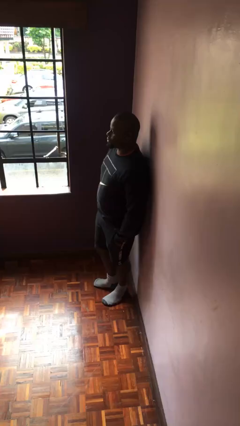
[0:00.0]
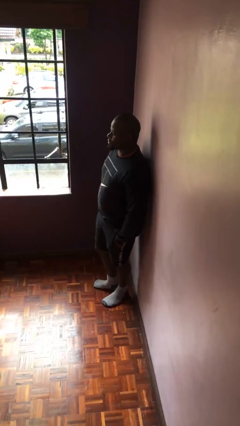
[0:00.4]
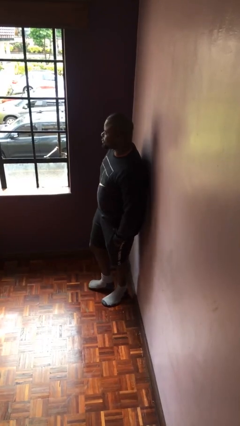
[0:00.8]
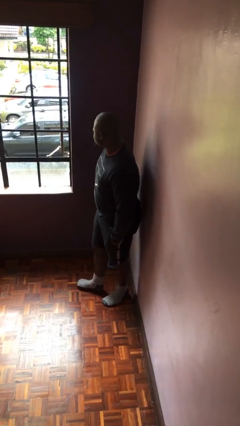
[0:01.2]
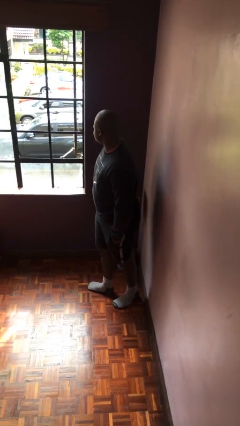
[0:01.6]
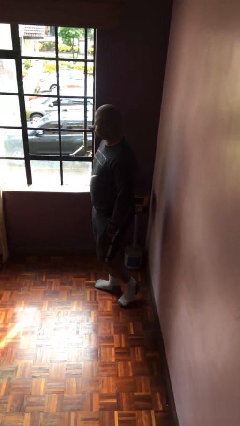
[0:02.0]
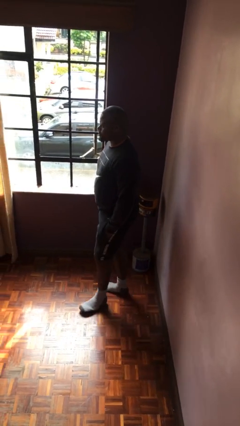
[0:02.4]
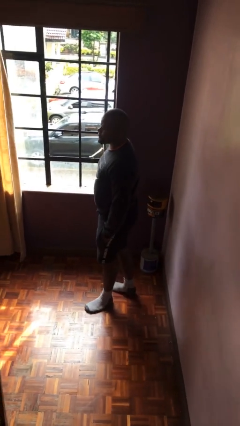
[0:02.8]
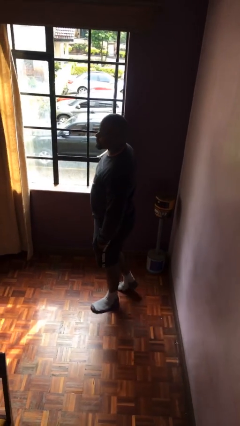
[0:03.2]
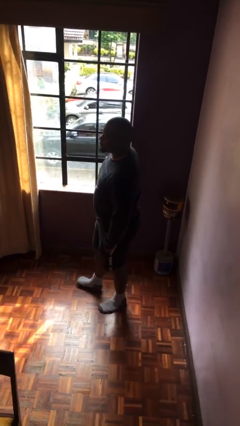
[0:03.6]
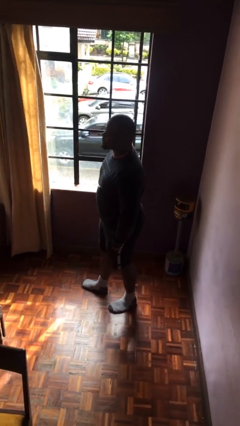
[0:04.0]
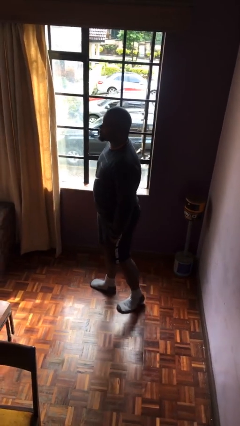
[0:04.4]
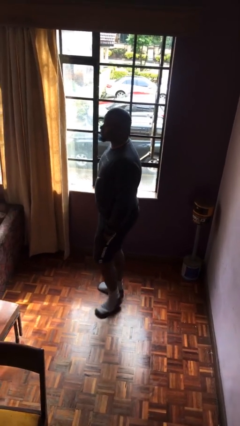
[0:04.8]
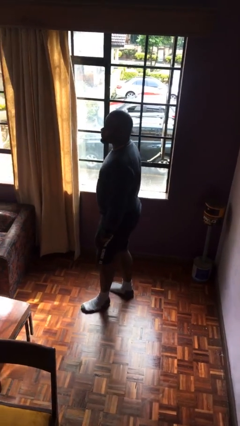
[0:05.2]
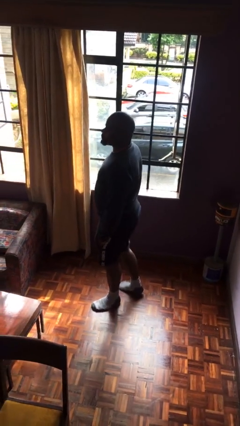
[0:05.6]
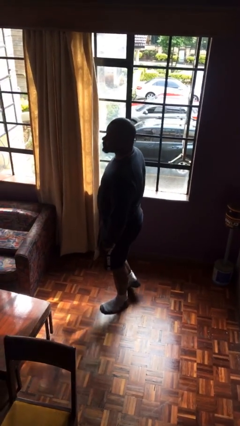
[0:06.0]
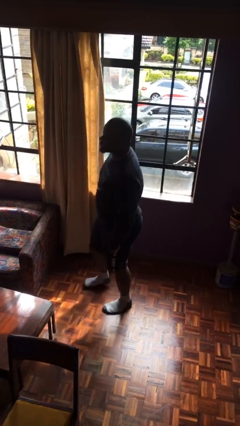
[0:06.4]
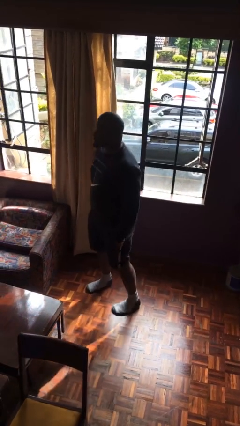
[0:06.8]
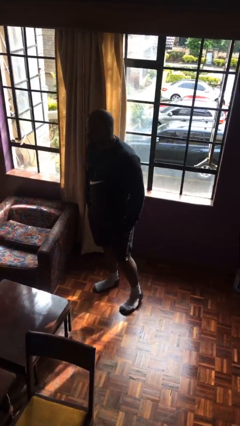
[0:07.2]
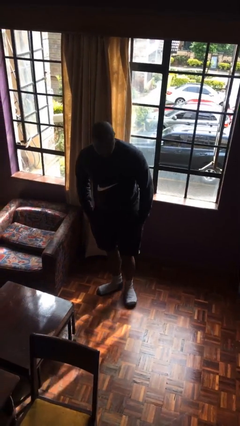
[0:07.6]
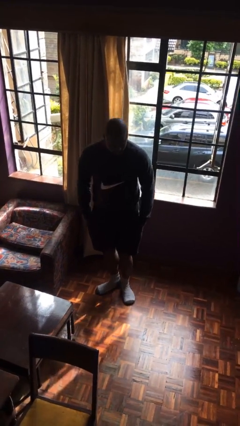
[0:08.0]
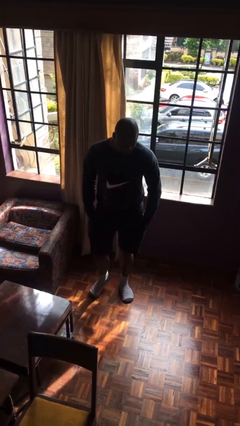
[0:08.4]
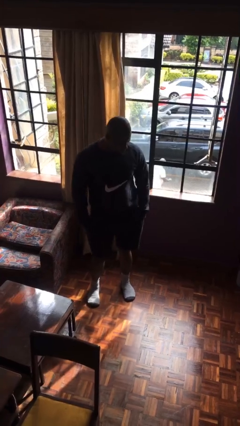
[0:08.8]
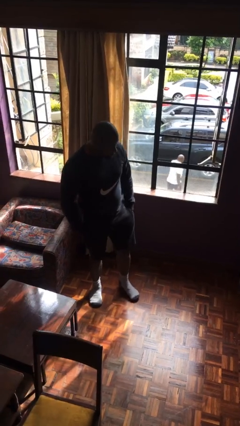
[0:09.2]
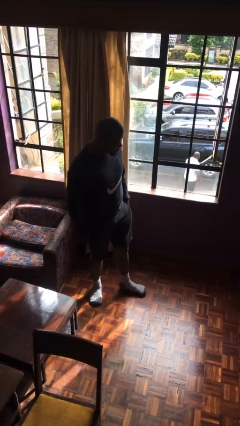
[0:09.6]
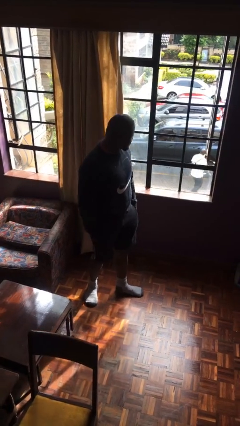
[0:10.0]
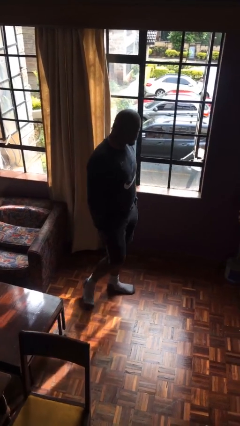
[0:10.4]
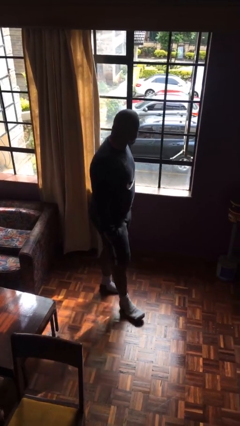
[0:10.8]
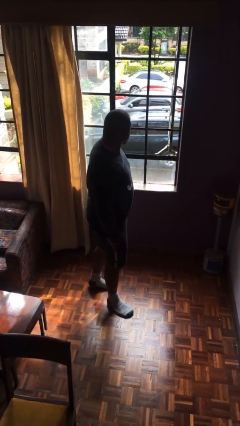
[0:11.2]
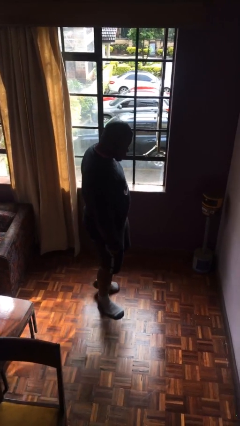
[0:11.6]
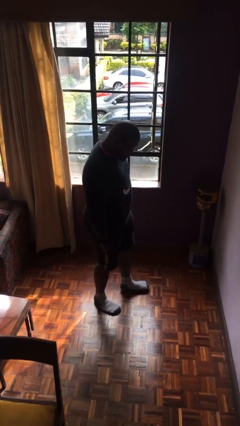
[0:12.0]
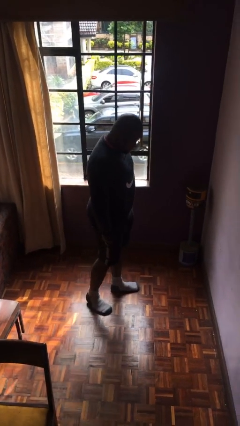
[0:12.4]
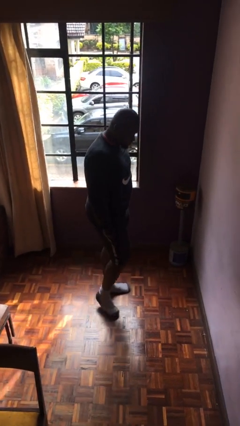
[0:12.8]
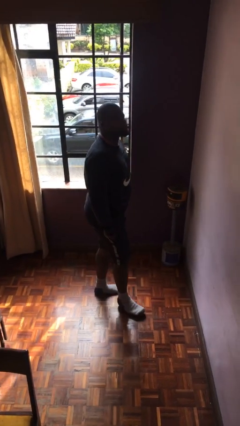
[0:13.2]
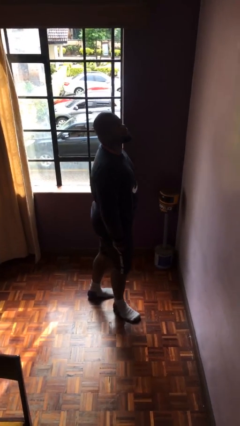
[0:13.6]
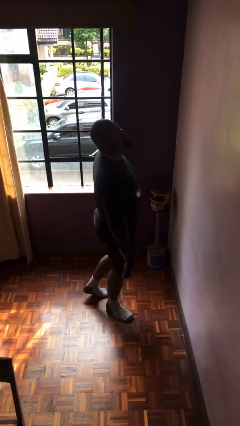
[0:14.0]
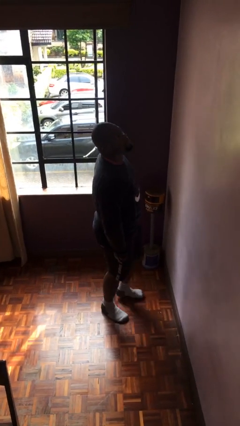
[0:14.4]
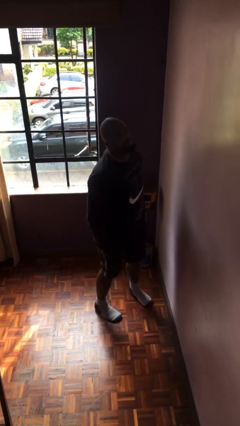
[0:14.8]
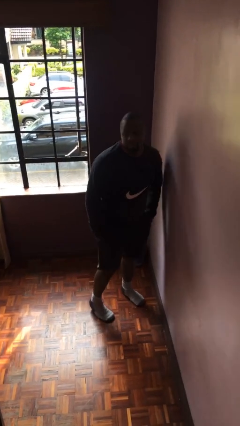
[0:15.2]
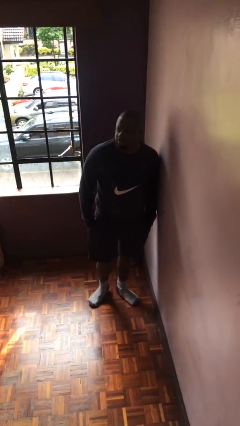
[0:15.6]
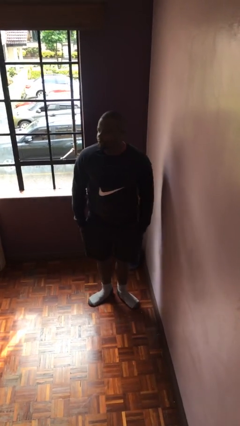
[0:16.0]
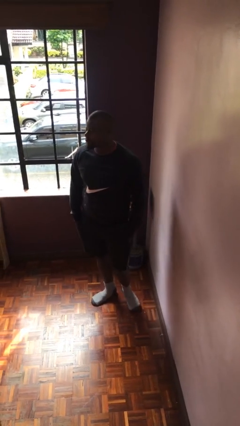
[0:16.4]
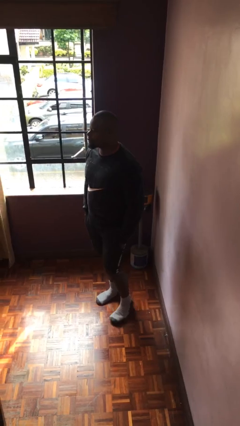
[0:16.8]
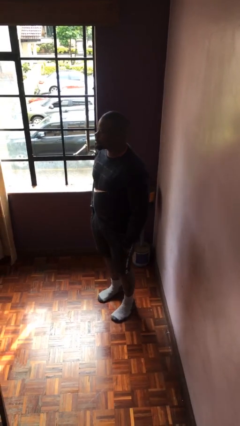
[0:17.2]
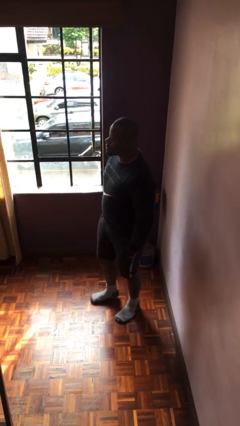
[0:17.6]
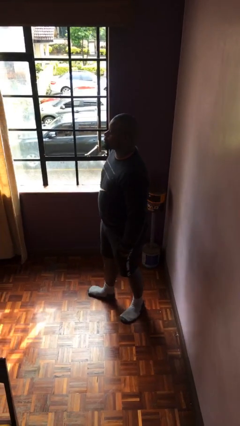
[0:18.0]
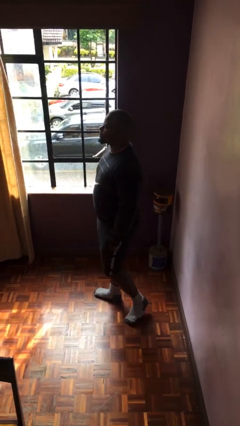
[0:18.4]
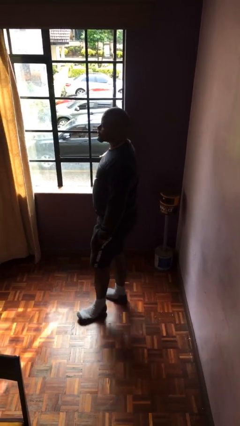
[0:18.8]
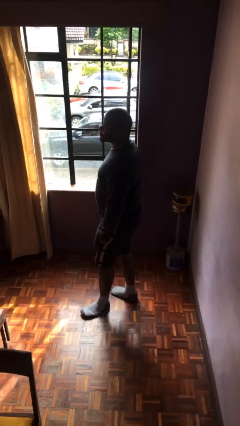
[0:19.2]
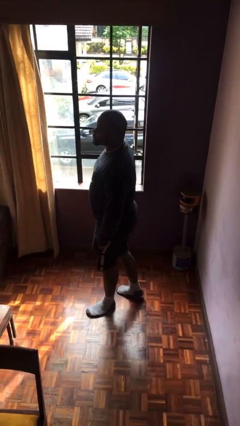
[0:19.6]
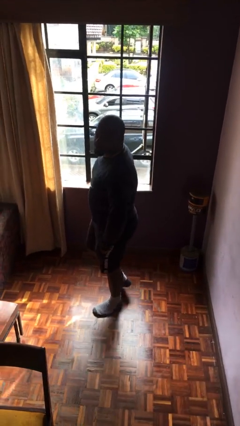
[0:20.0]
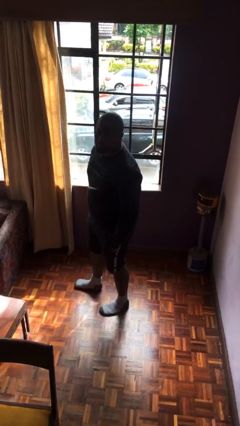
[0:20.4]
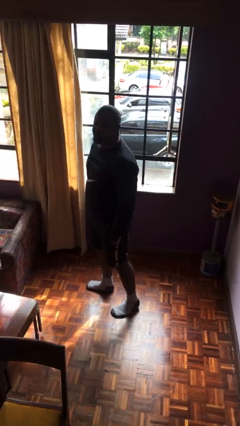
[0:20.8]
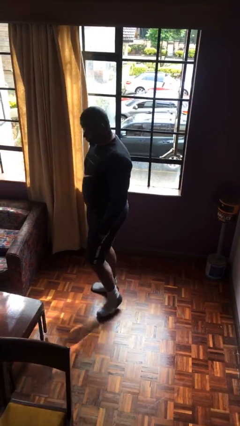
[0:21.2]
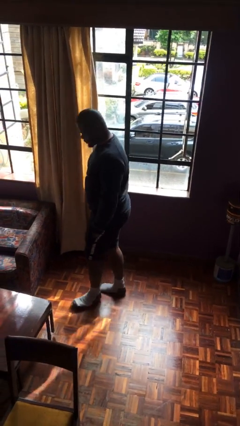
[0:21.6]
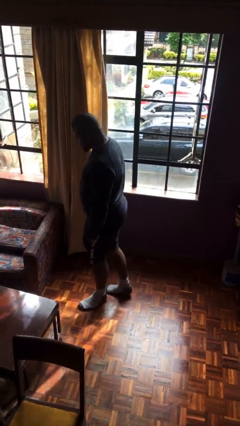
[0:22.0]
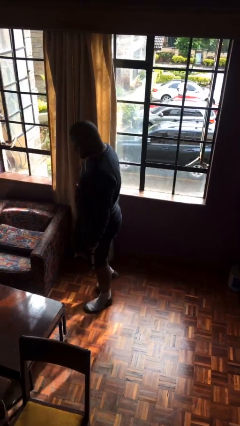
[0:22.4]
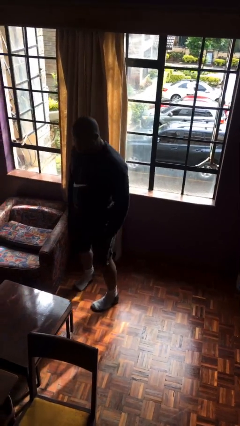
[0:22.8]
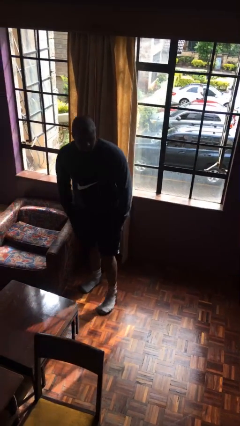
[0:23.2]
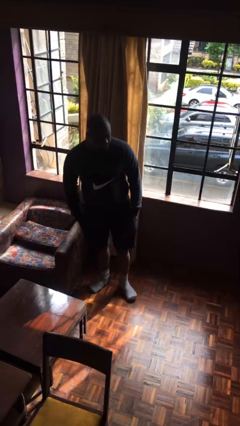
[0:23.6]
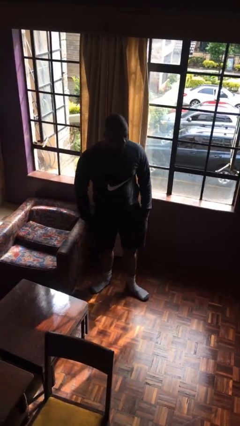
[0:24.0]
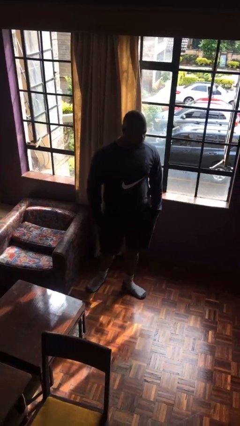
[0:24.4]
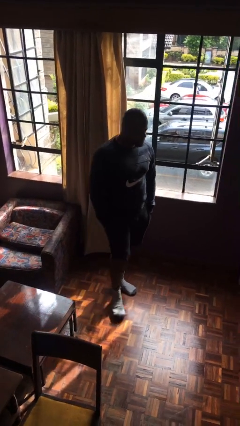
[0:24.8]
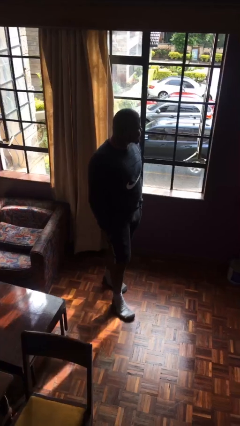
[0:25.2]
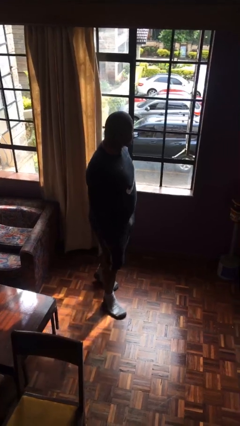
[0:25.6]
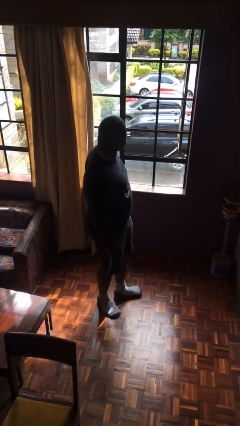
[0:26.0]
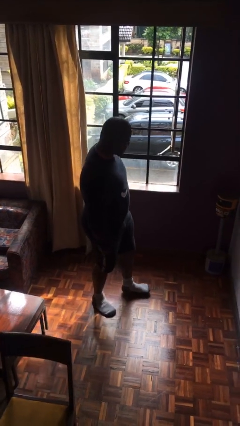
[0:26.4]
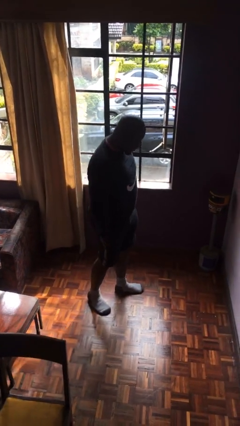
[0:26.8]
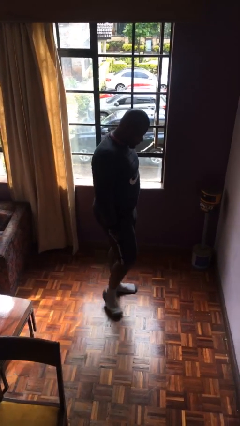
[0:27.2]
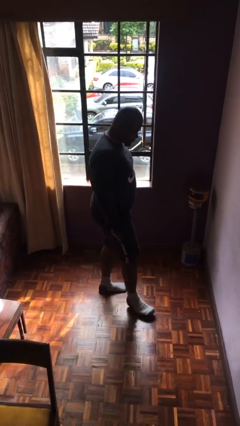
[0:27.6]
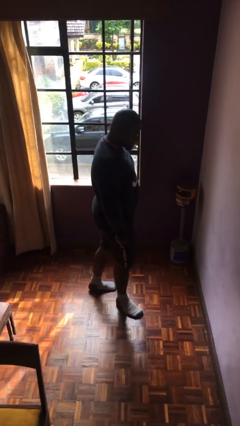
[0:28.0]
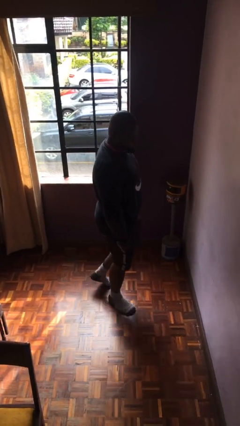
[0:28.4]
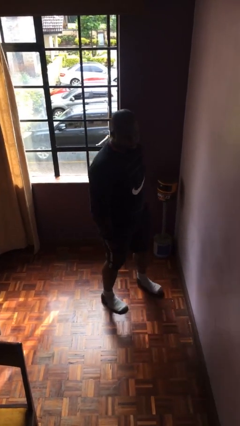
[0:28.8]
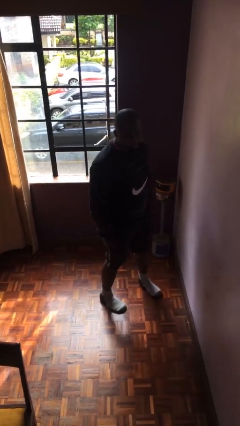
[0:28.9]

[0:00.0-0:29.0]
person walks

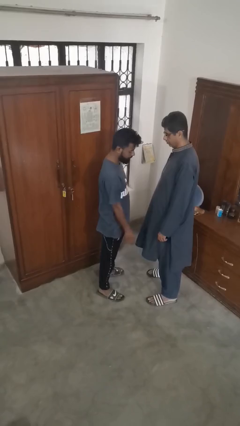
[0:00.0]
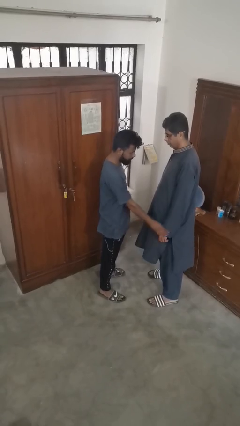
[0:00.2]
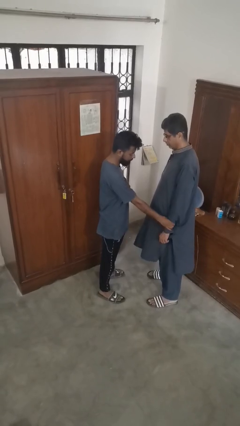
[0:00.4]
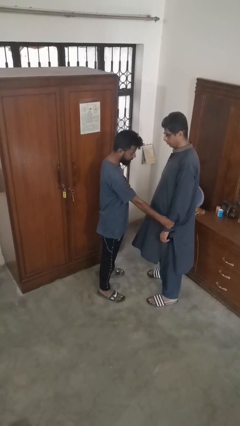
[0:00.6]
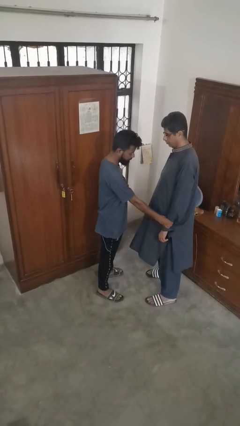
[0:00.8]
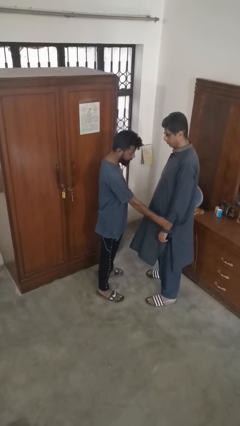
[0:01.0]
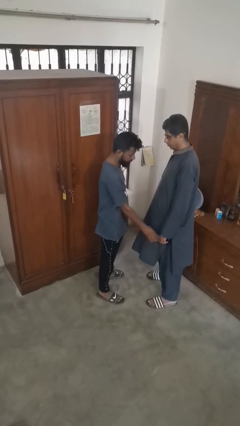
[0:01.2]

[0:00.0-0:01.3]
person grabs person by forearm

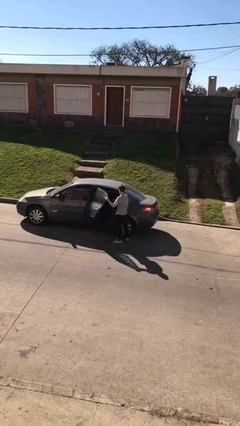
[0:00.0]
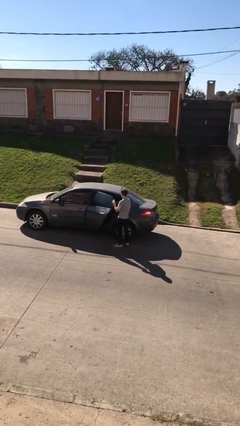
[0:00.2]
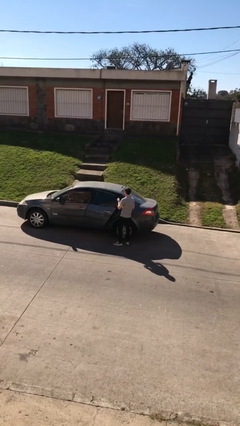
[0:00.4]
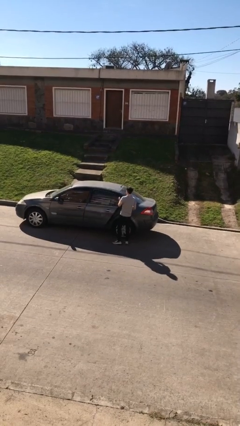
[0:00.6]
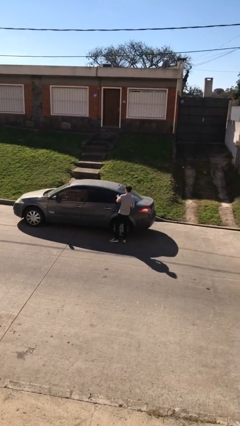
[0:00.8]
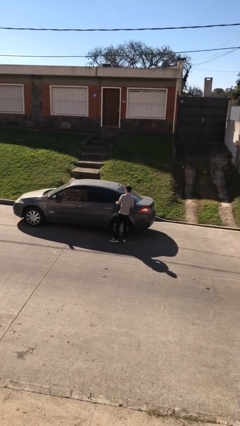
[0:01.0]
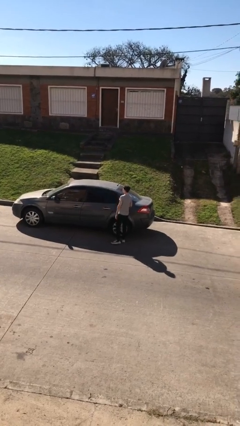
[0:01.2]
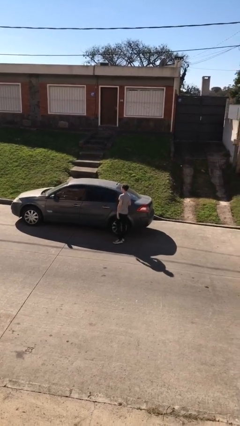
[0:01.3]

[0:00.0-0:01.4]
person closes car door

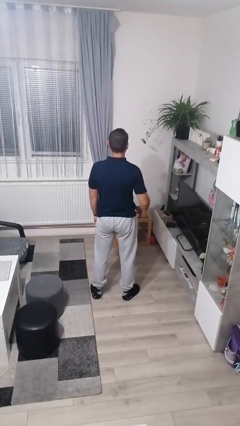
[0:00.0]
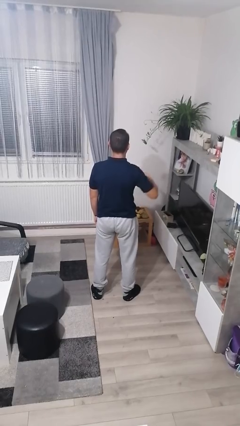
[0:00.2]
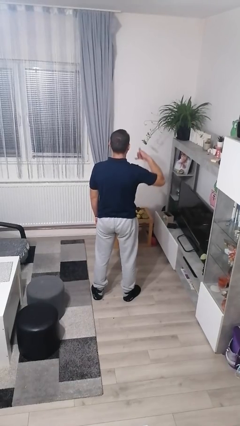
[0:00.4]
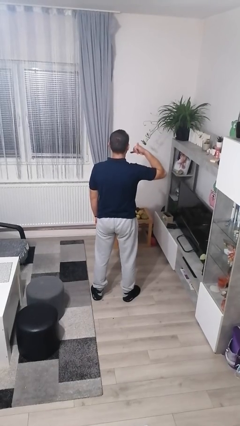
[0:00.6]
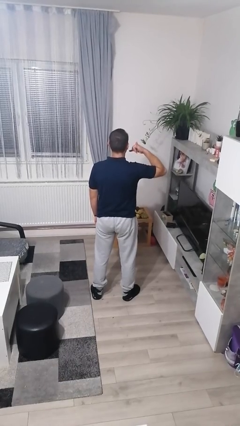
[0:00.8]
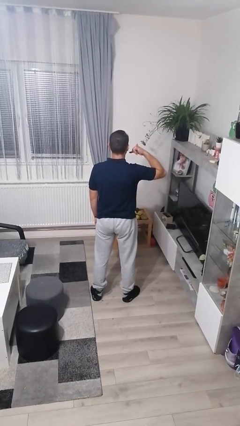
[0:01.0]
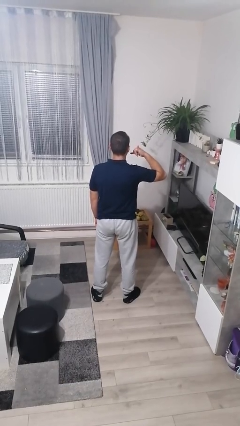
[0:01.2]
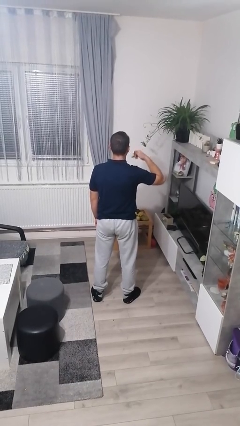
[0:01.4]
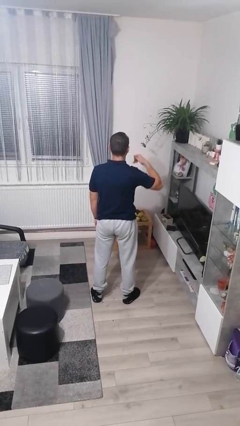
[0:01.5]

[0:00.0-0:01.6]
person gestures call me
